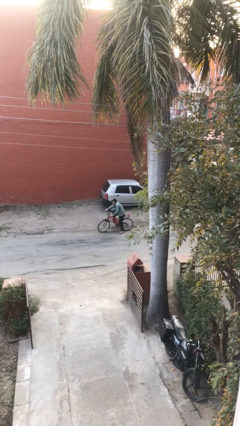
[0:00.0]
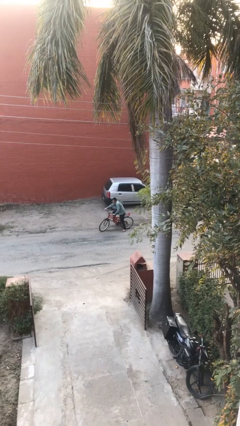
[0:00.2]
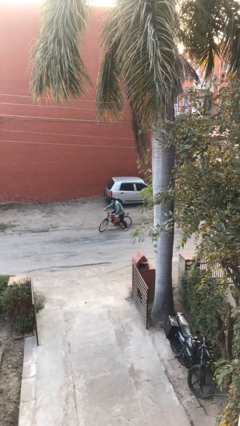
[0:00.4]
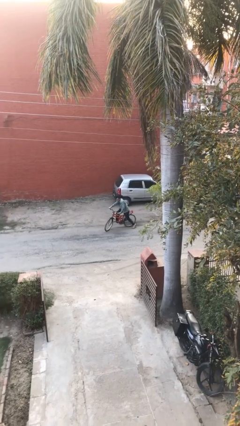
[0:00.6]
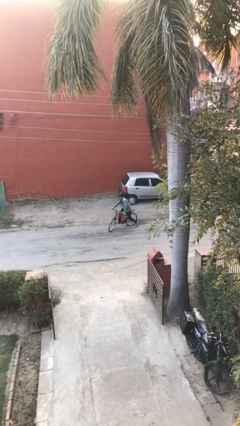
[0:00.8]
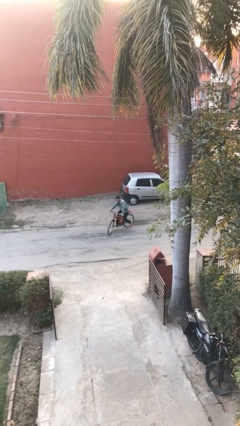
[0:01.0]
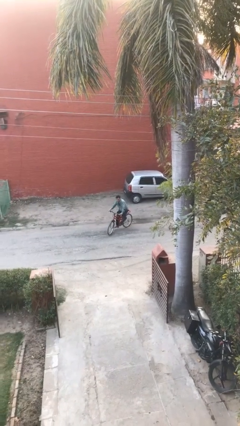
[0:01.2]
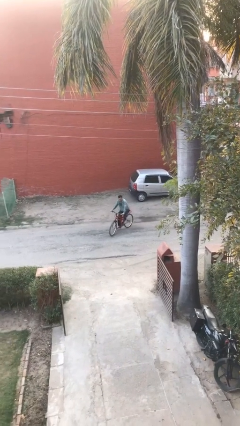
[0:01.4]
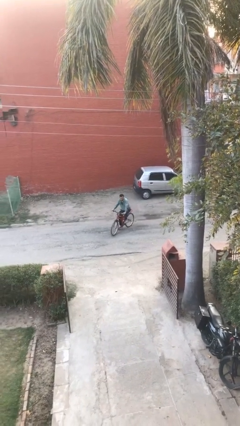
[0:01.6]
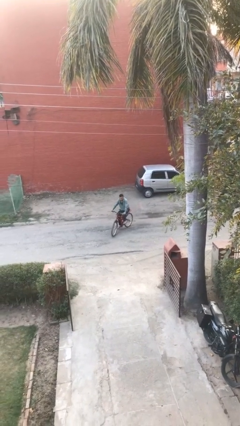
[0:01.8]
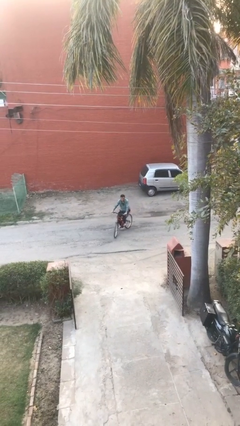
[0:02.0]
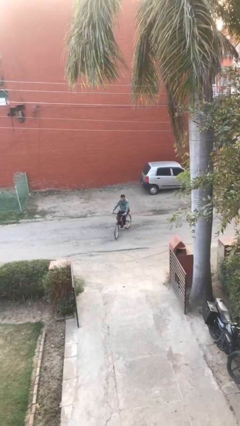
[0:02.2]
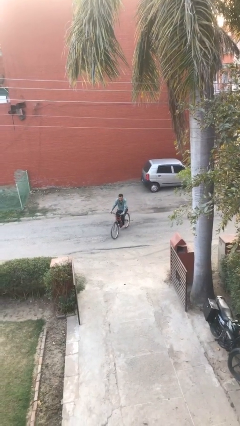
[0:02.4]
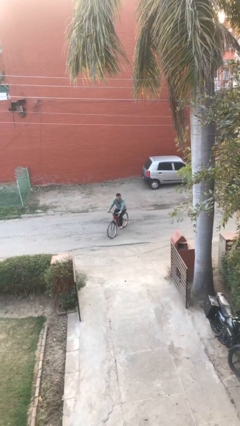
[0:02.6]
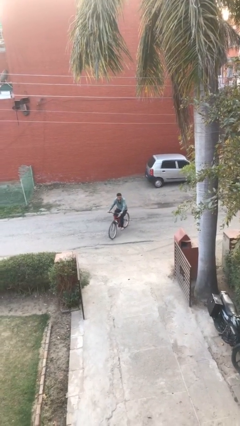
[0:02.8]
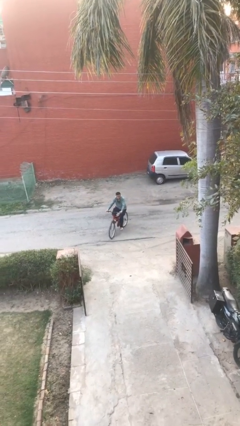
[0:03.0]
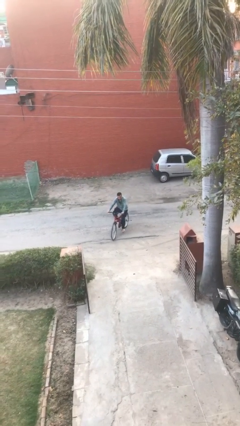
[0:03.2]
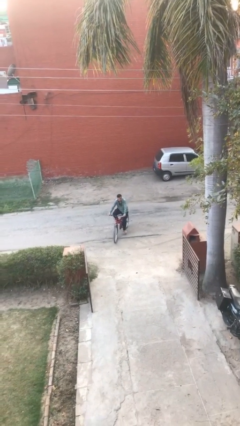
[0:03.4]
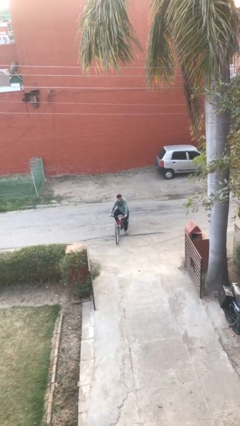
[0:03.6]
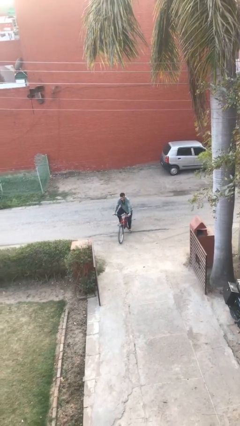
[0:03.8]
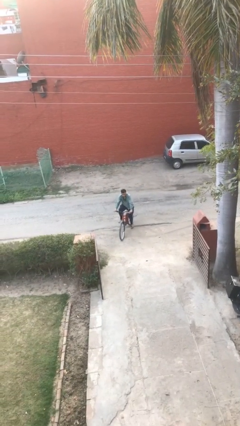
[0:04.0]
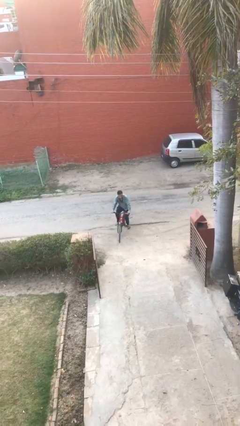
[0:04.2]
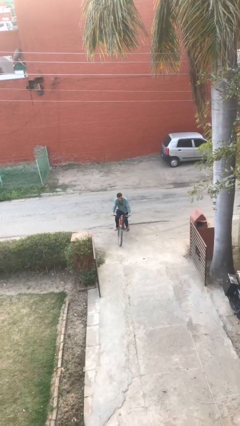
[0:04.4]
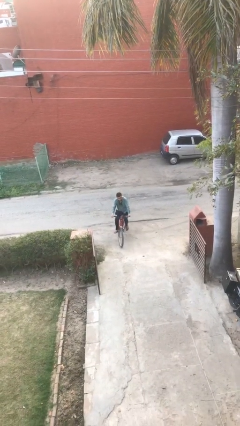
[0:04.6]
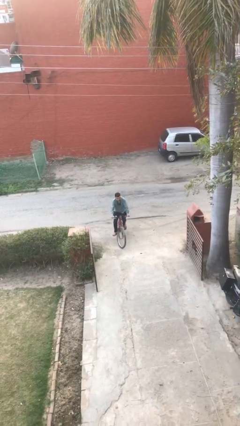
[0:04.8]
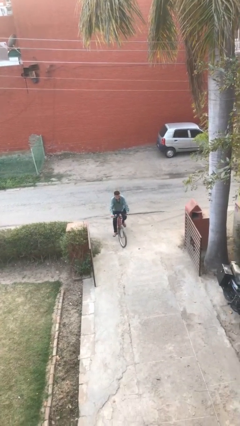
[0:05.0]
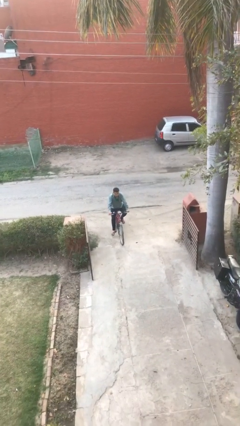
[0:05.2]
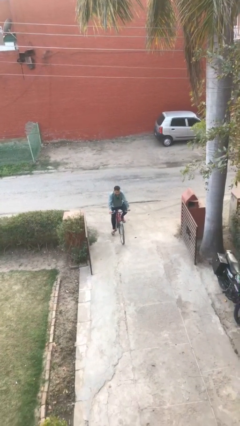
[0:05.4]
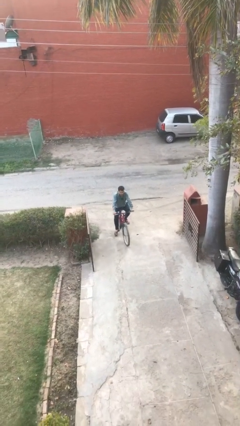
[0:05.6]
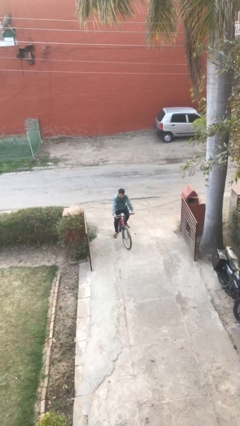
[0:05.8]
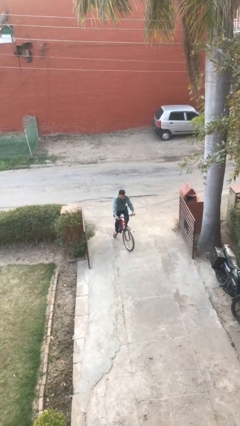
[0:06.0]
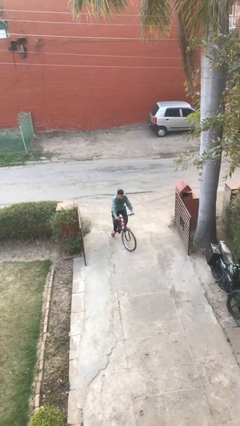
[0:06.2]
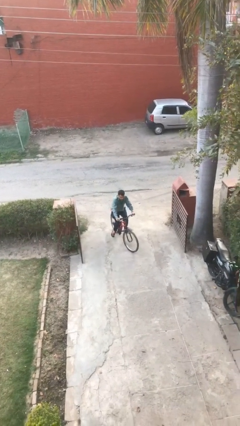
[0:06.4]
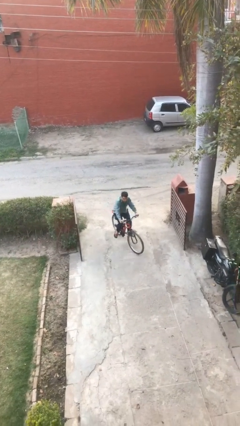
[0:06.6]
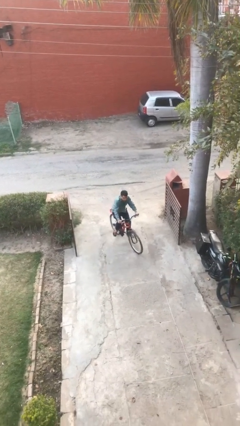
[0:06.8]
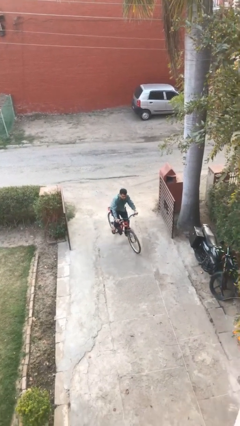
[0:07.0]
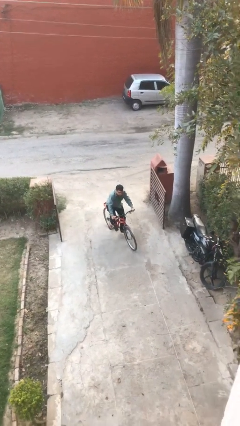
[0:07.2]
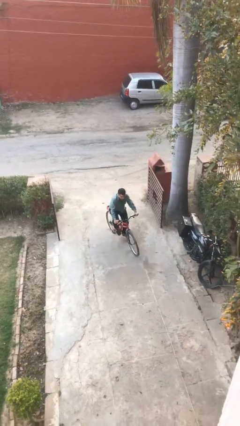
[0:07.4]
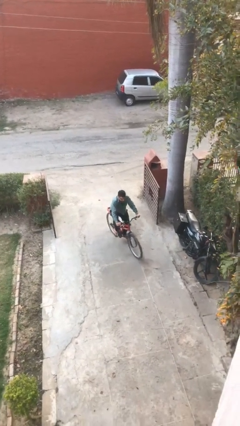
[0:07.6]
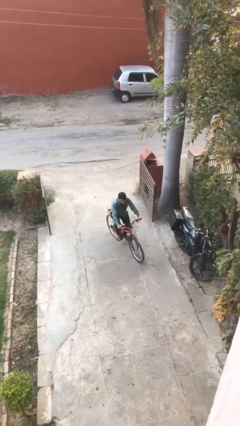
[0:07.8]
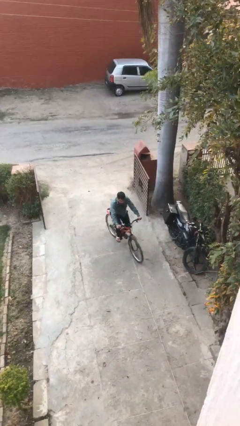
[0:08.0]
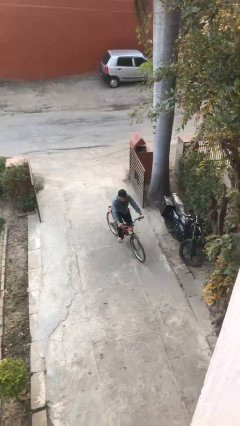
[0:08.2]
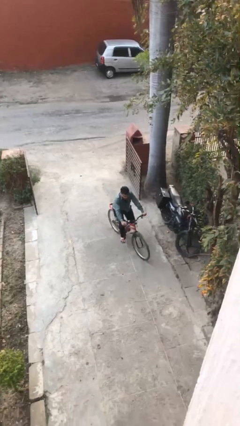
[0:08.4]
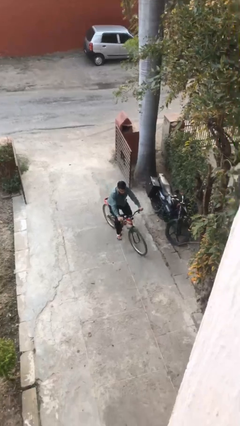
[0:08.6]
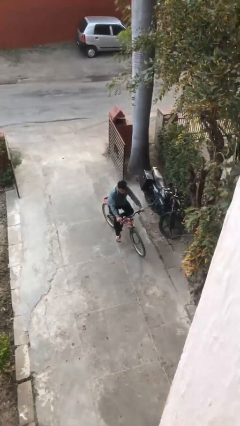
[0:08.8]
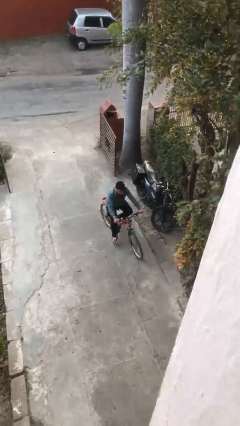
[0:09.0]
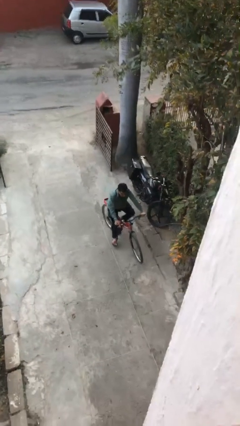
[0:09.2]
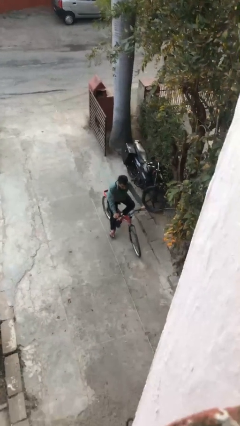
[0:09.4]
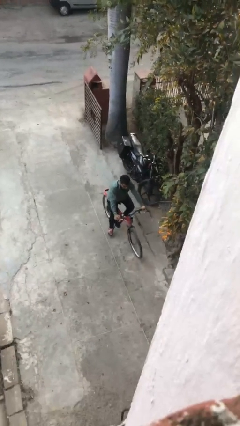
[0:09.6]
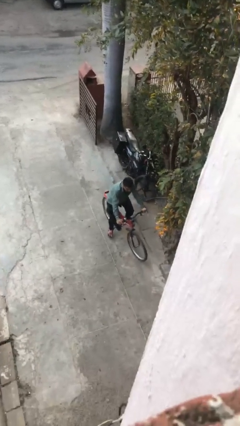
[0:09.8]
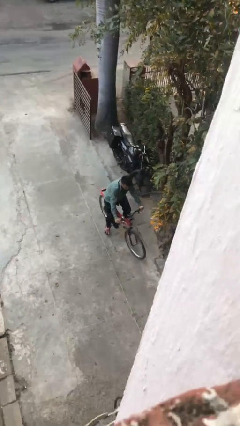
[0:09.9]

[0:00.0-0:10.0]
person rides bicycle

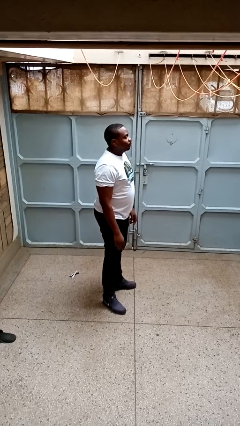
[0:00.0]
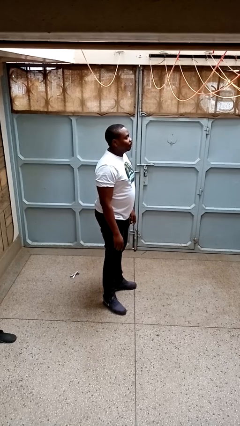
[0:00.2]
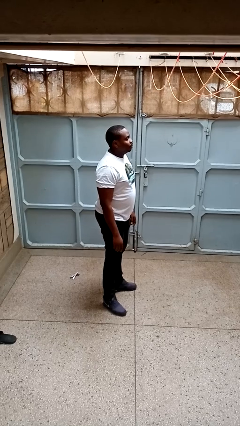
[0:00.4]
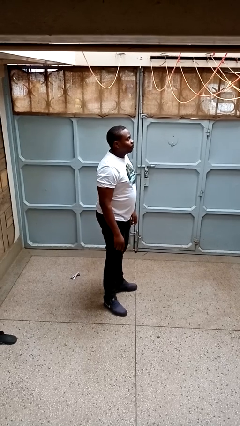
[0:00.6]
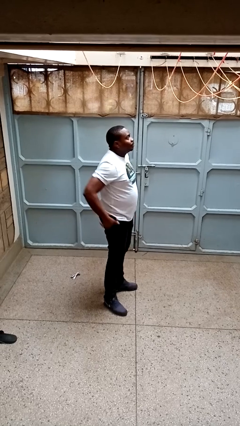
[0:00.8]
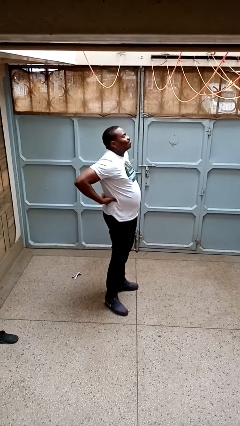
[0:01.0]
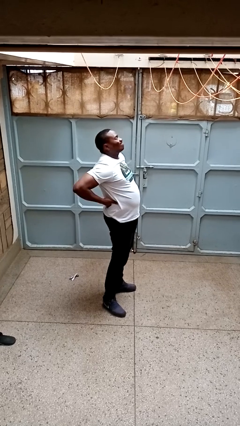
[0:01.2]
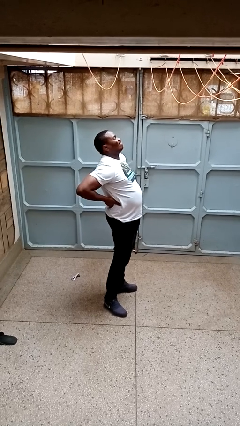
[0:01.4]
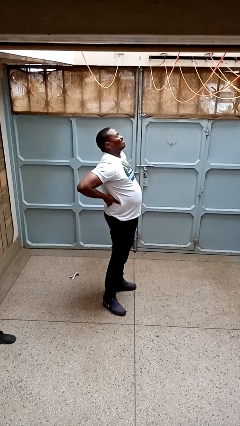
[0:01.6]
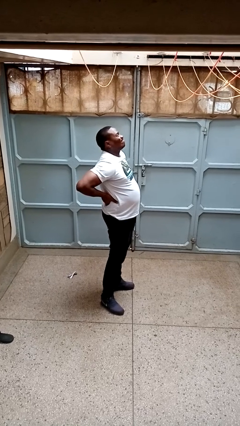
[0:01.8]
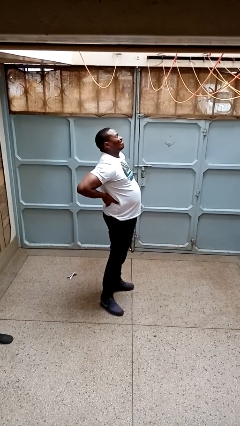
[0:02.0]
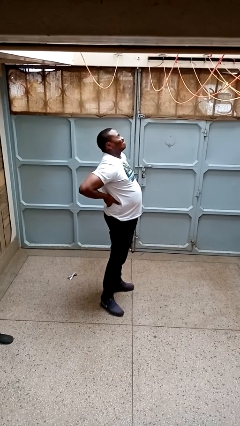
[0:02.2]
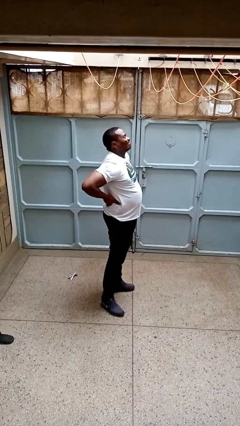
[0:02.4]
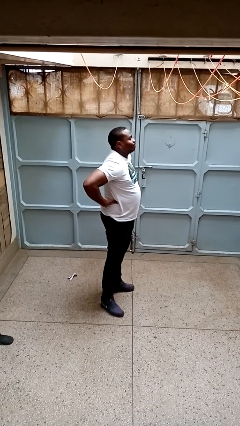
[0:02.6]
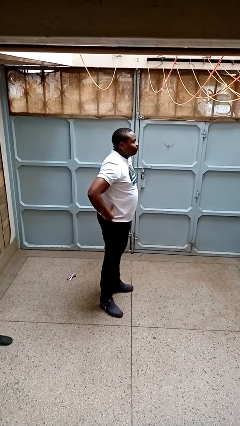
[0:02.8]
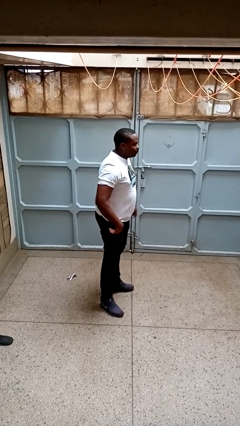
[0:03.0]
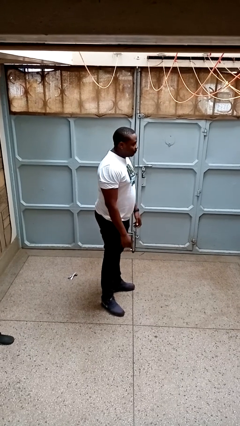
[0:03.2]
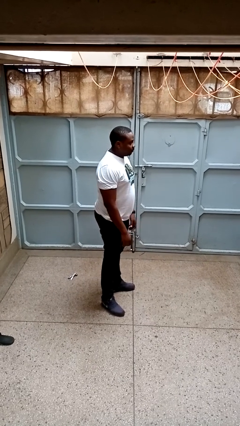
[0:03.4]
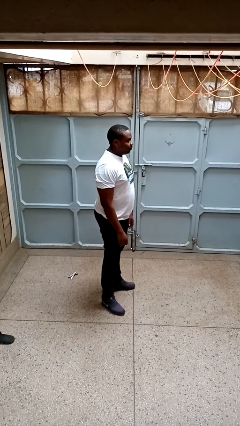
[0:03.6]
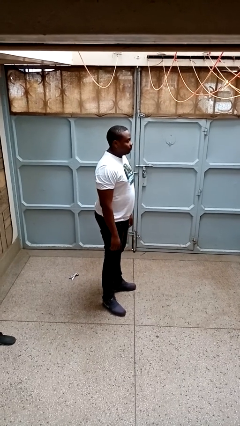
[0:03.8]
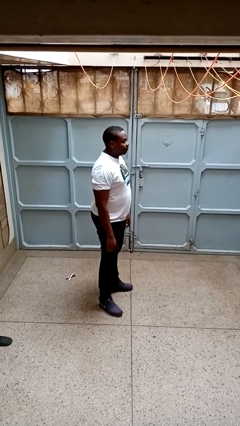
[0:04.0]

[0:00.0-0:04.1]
person stretches back

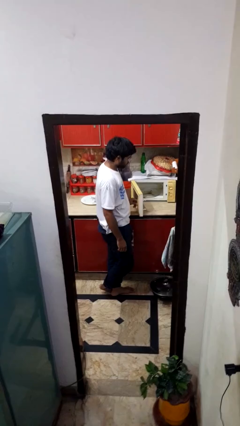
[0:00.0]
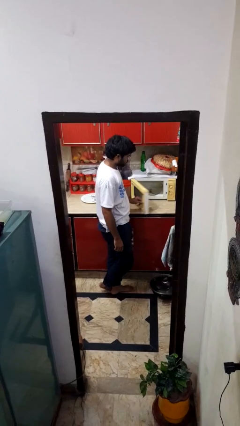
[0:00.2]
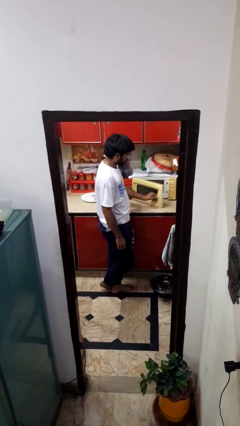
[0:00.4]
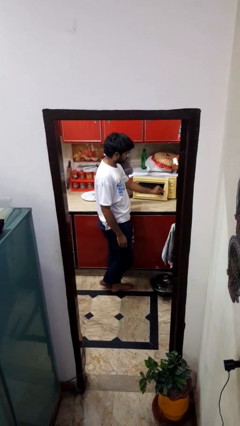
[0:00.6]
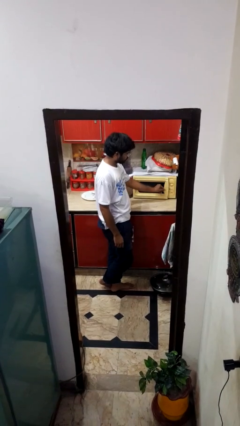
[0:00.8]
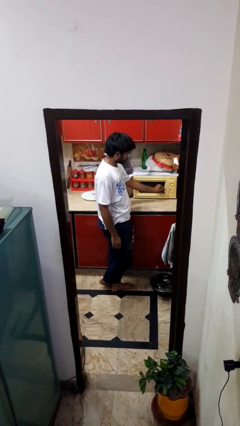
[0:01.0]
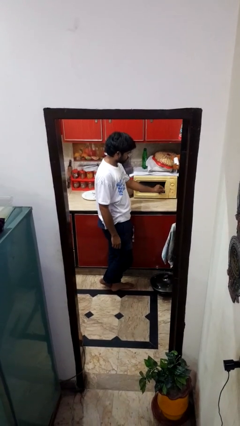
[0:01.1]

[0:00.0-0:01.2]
person closes oven door

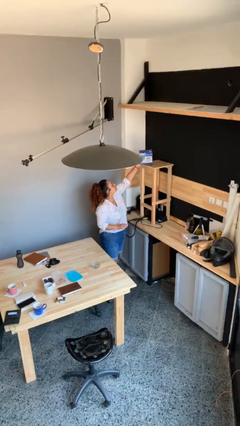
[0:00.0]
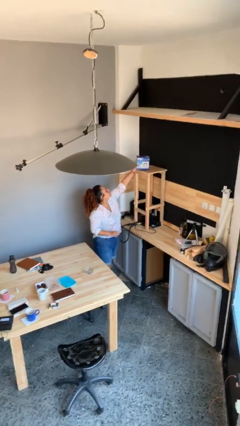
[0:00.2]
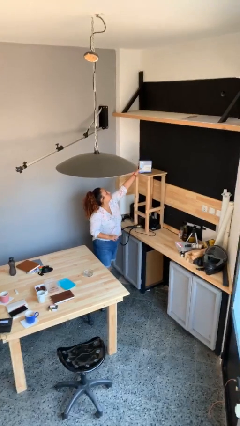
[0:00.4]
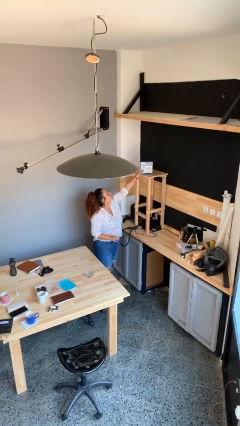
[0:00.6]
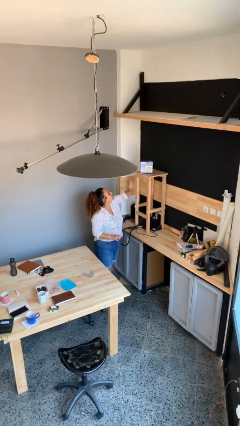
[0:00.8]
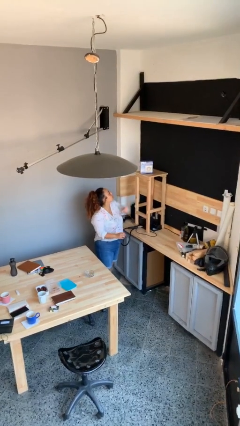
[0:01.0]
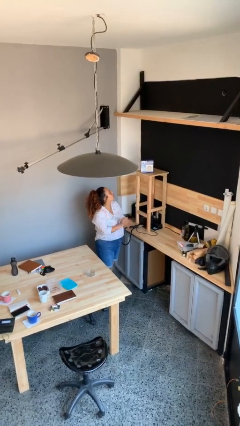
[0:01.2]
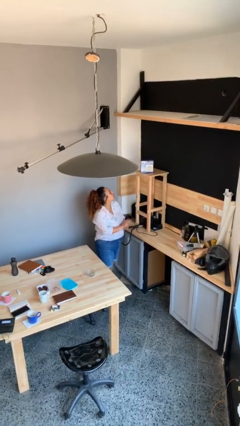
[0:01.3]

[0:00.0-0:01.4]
person puts down object on shelf

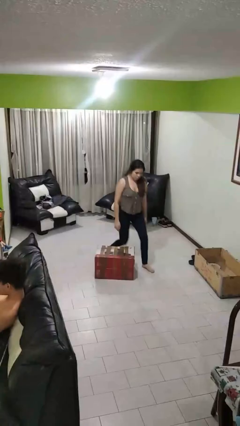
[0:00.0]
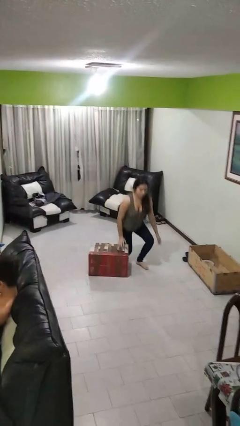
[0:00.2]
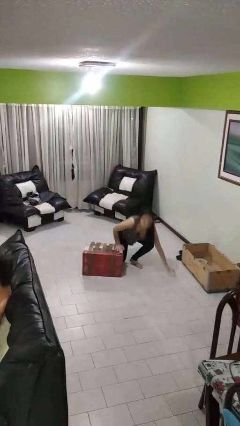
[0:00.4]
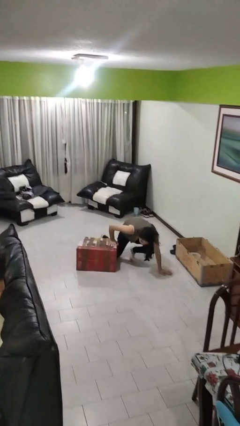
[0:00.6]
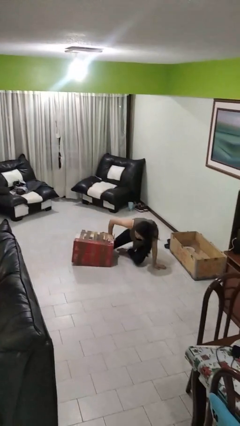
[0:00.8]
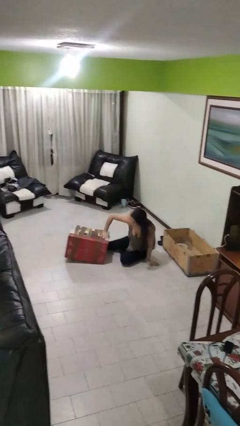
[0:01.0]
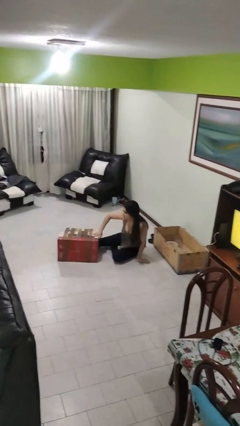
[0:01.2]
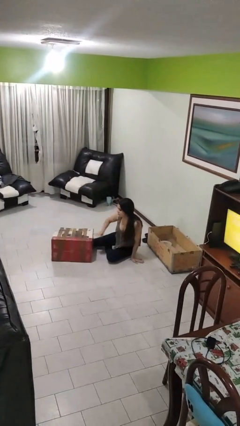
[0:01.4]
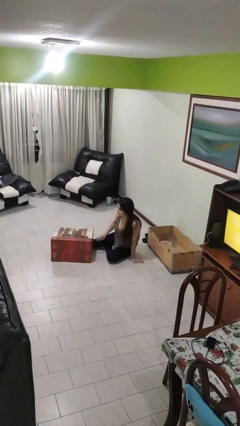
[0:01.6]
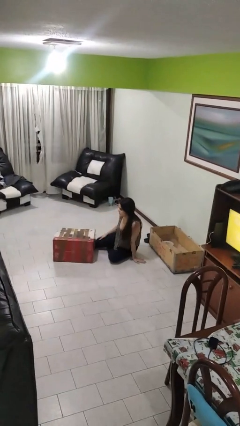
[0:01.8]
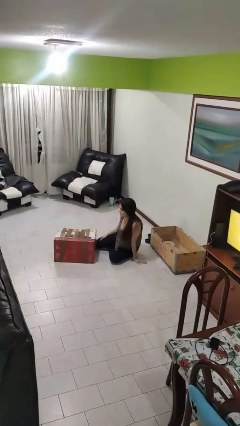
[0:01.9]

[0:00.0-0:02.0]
person trips on object on floor
